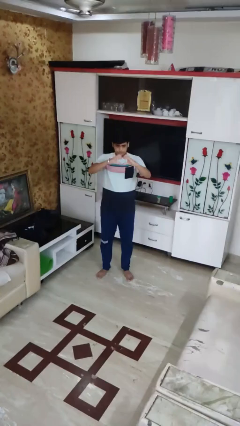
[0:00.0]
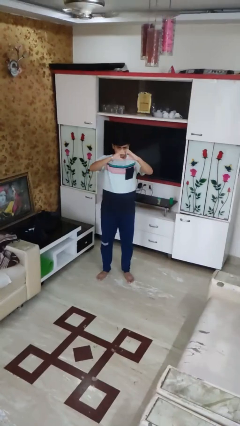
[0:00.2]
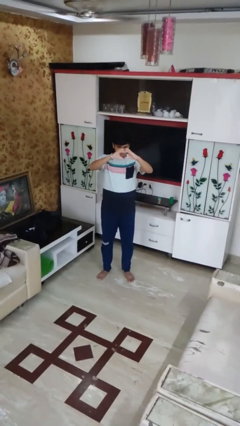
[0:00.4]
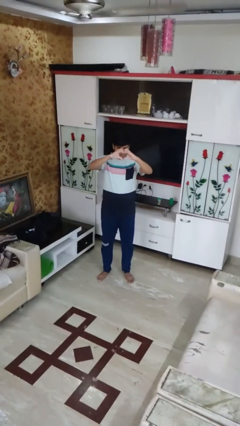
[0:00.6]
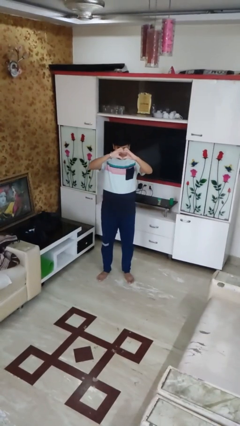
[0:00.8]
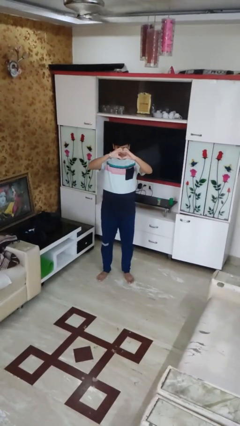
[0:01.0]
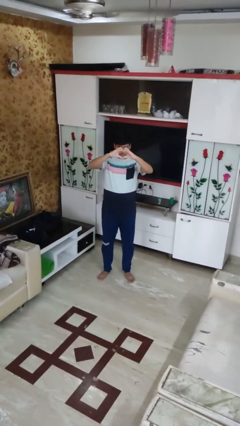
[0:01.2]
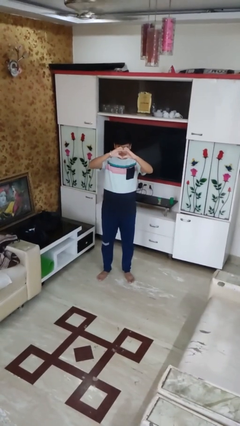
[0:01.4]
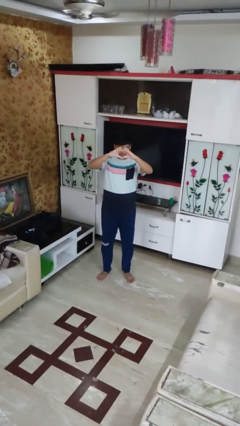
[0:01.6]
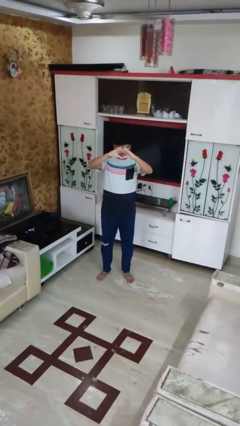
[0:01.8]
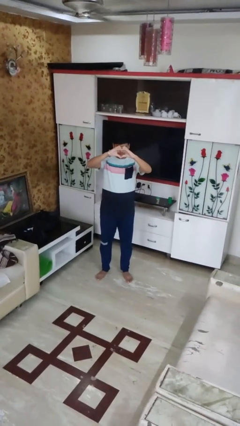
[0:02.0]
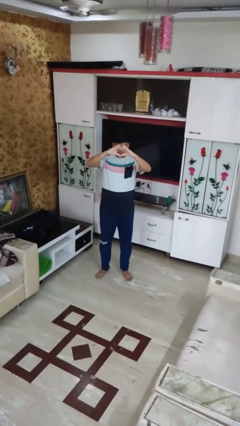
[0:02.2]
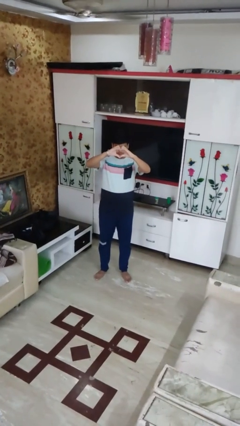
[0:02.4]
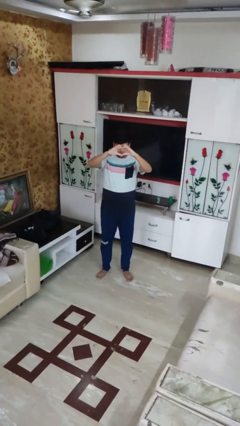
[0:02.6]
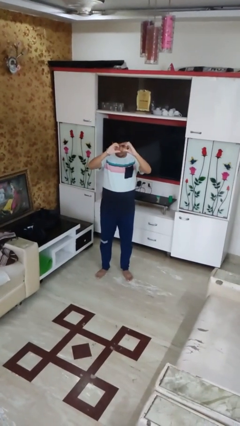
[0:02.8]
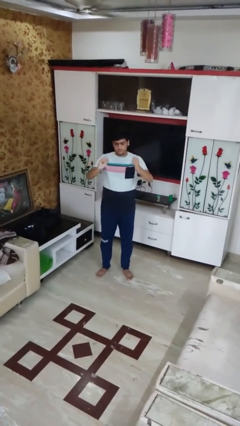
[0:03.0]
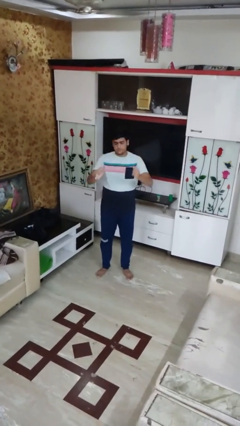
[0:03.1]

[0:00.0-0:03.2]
person gestures heart

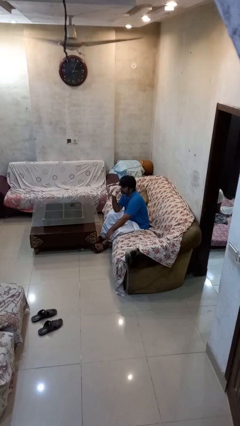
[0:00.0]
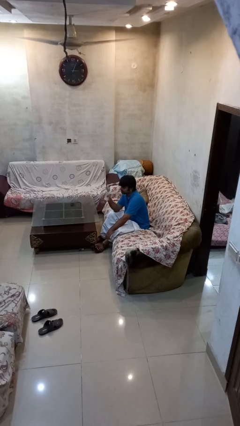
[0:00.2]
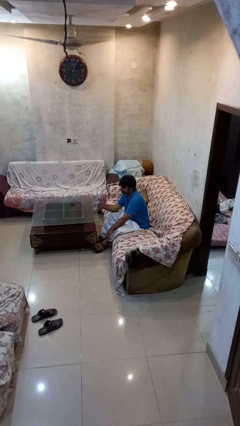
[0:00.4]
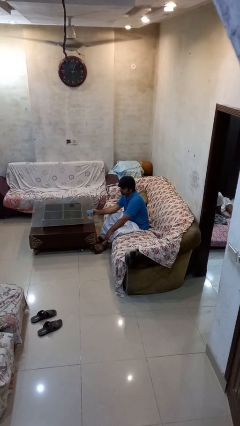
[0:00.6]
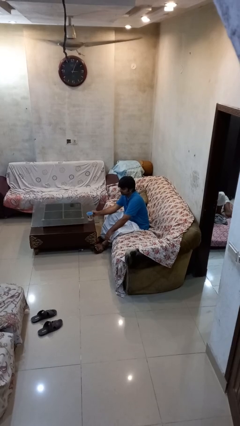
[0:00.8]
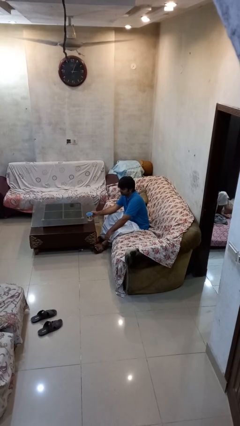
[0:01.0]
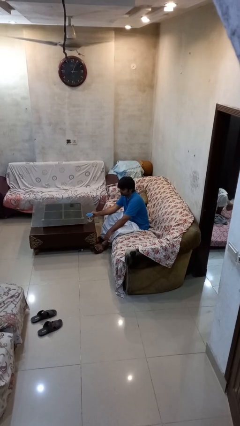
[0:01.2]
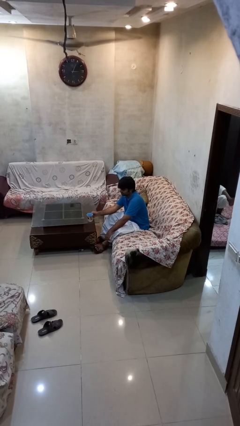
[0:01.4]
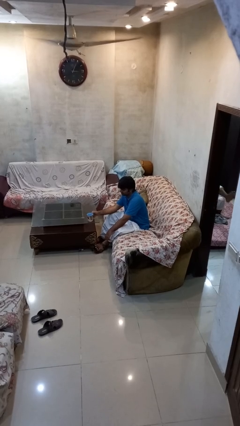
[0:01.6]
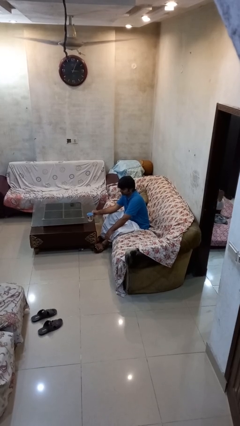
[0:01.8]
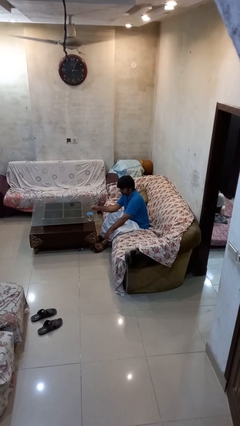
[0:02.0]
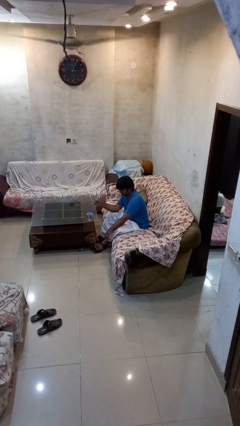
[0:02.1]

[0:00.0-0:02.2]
person puts down object on table

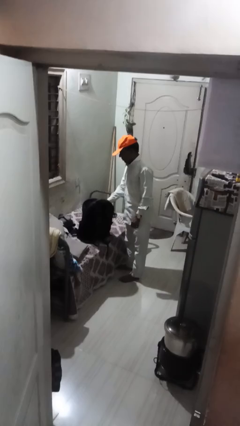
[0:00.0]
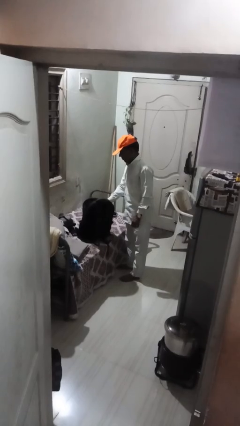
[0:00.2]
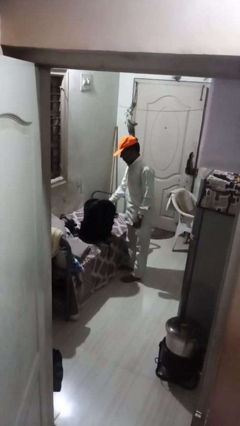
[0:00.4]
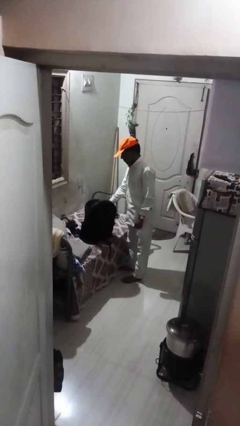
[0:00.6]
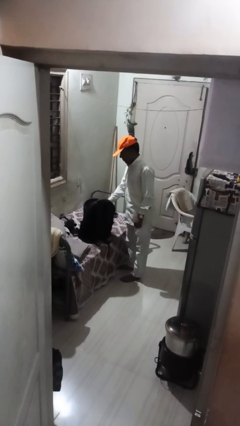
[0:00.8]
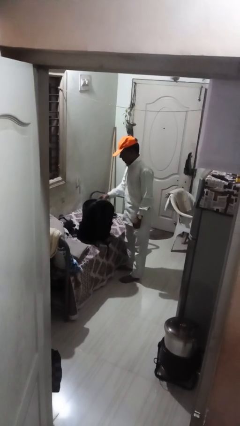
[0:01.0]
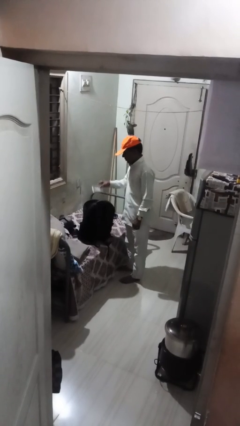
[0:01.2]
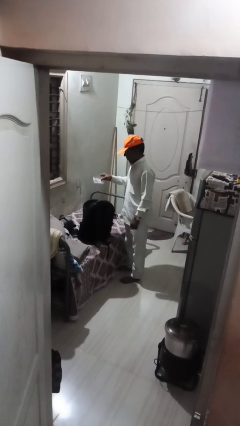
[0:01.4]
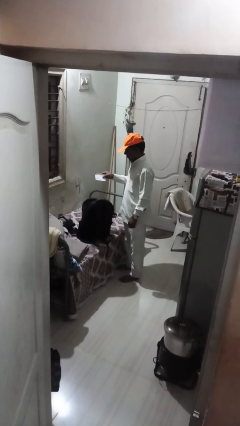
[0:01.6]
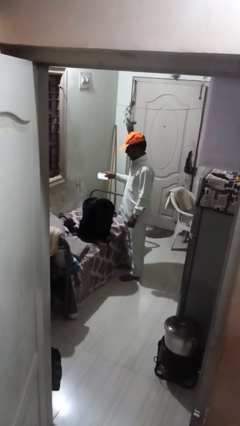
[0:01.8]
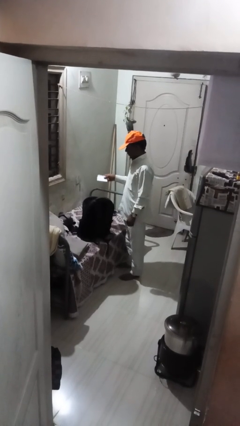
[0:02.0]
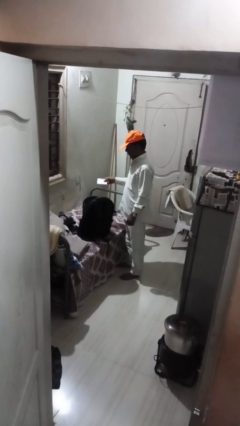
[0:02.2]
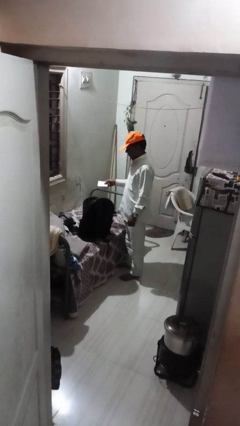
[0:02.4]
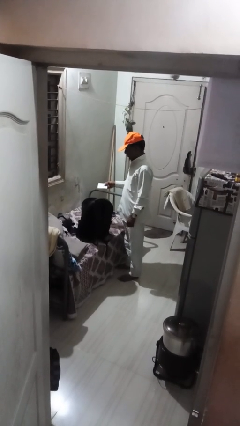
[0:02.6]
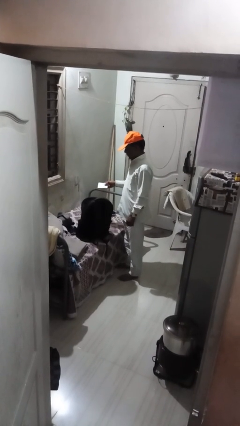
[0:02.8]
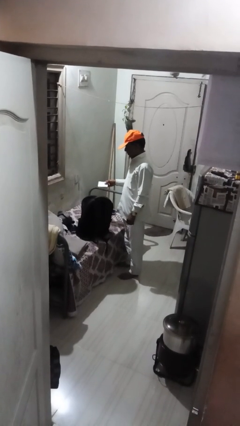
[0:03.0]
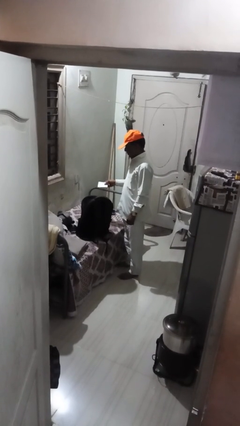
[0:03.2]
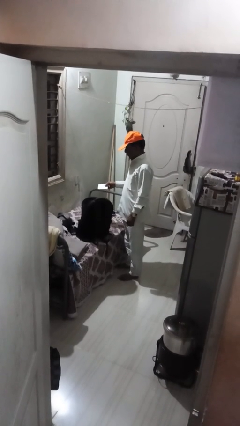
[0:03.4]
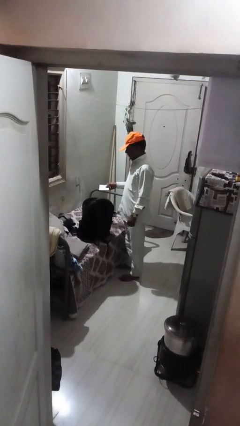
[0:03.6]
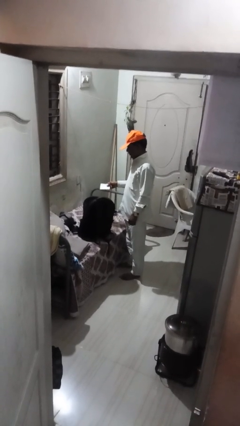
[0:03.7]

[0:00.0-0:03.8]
person takes object from backpack

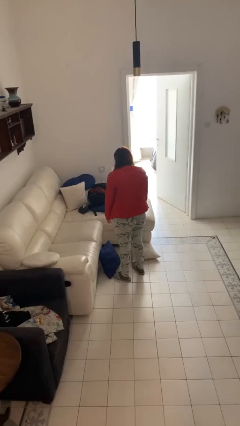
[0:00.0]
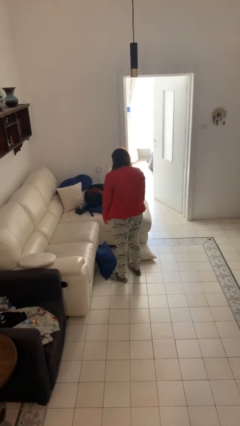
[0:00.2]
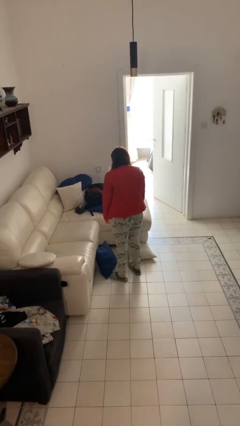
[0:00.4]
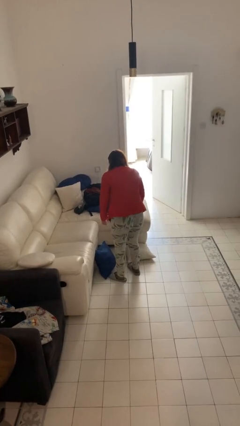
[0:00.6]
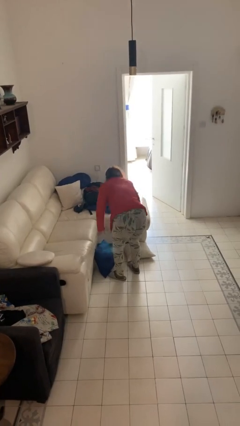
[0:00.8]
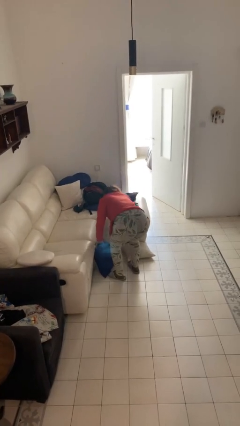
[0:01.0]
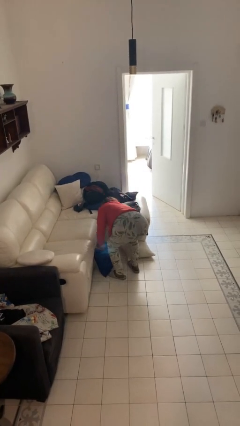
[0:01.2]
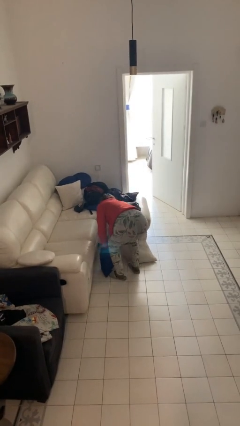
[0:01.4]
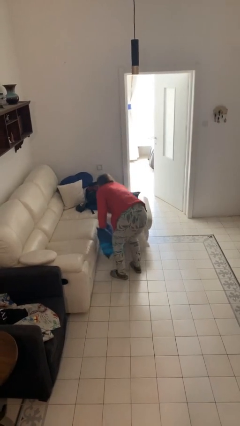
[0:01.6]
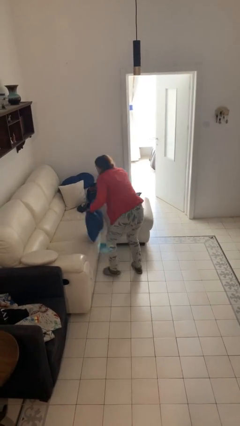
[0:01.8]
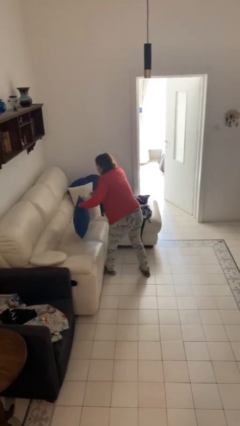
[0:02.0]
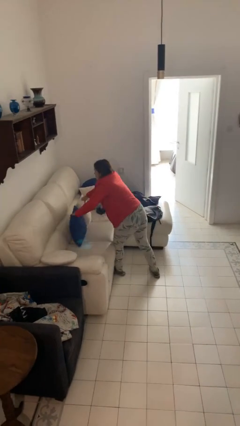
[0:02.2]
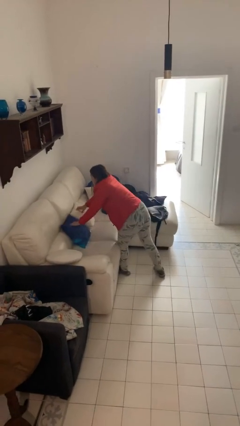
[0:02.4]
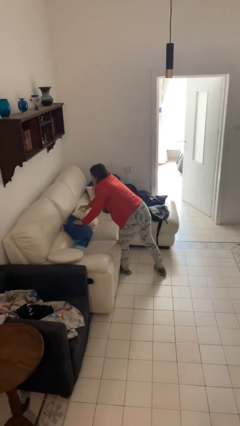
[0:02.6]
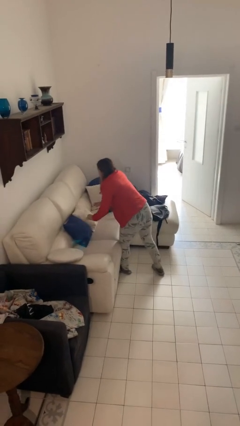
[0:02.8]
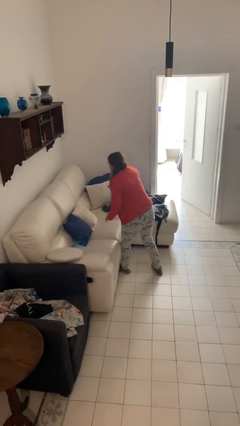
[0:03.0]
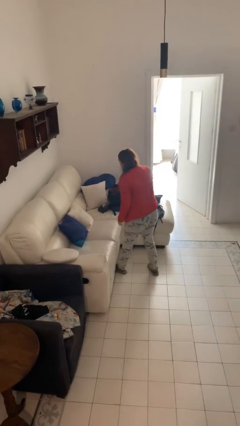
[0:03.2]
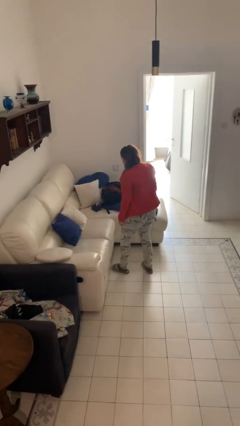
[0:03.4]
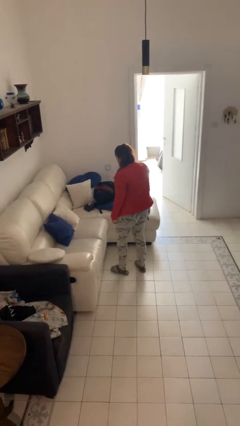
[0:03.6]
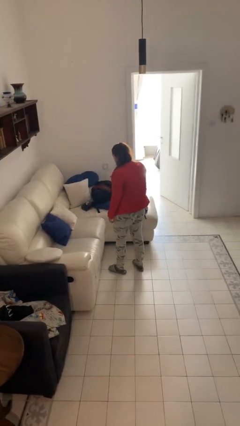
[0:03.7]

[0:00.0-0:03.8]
person sets upright furniture

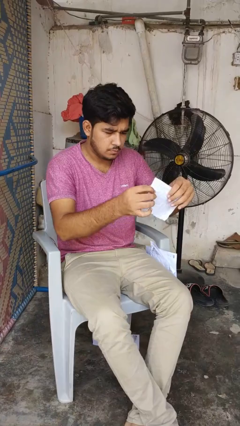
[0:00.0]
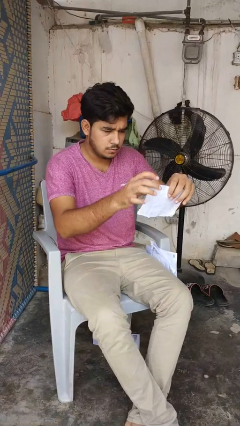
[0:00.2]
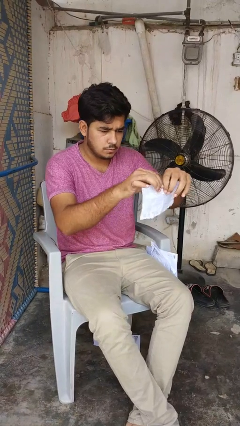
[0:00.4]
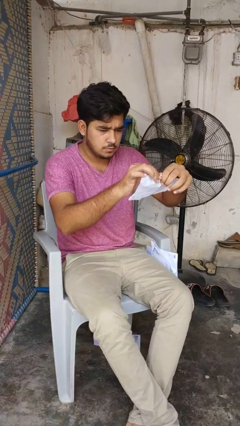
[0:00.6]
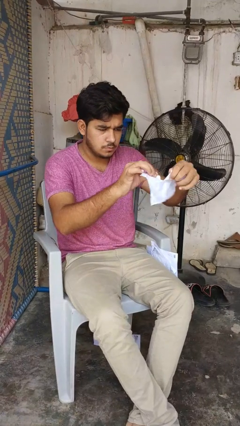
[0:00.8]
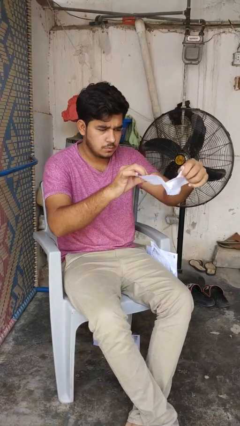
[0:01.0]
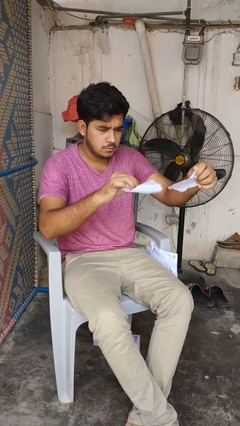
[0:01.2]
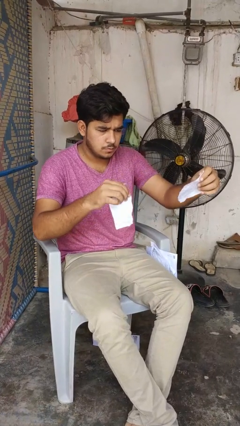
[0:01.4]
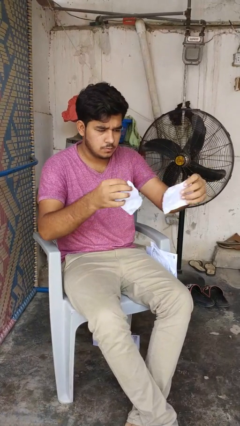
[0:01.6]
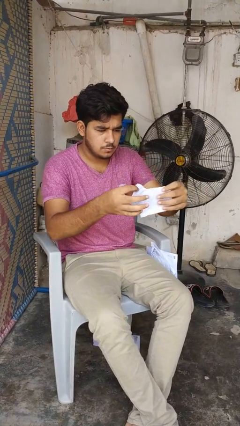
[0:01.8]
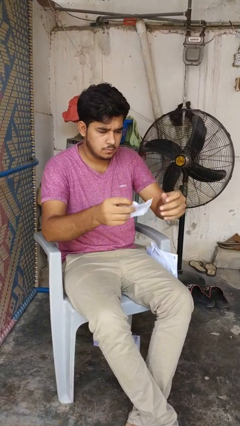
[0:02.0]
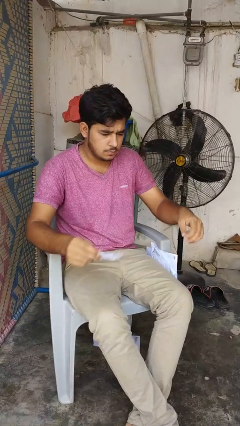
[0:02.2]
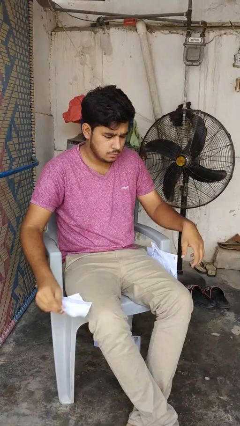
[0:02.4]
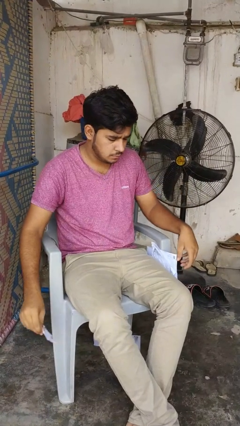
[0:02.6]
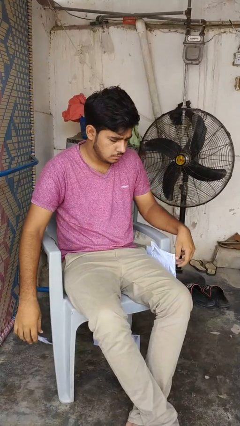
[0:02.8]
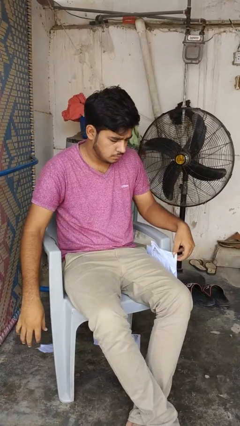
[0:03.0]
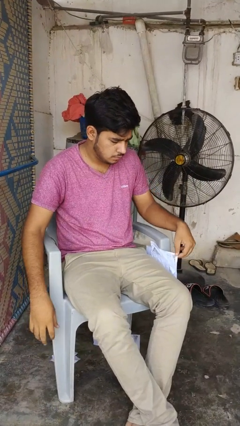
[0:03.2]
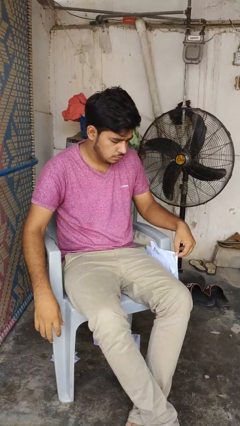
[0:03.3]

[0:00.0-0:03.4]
person tears paper

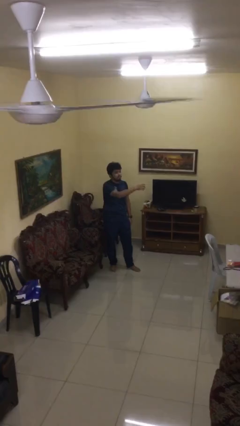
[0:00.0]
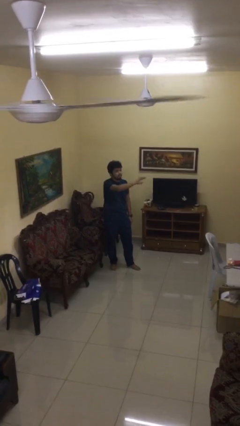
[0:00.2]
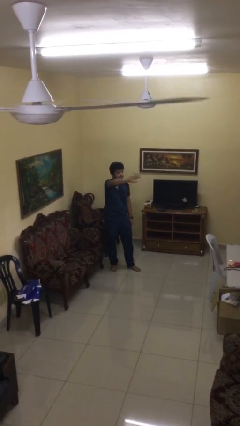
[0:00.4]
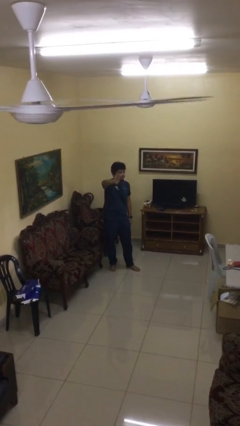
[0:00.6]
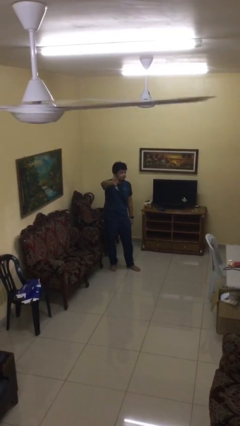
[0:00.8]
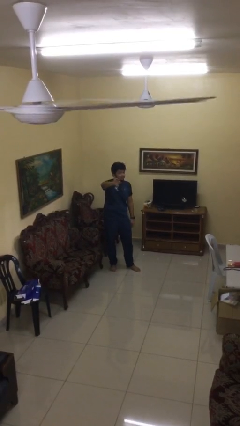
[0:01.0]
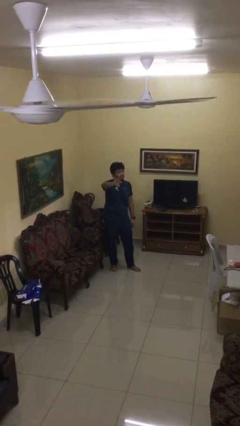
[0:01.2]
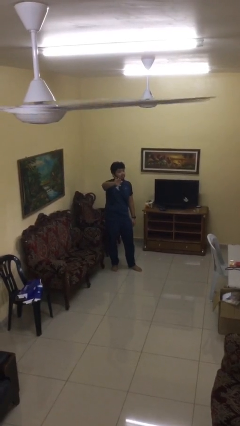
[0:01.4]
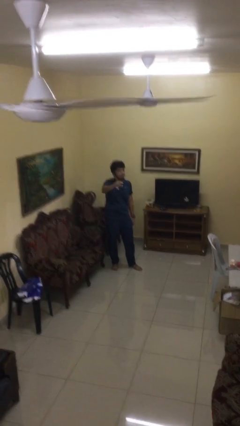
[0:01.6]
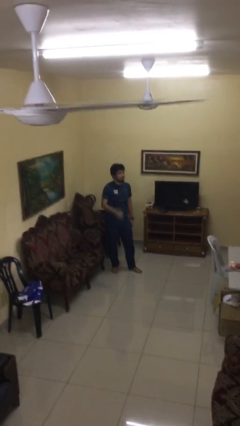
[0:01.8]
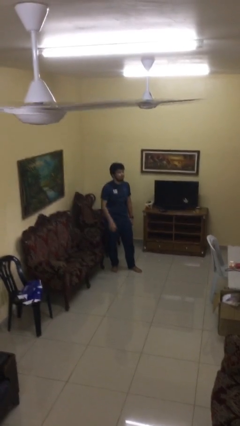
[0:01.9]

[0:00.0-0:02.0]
person gestures swipe right
